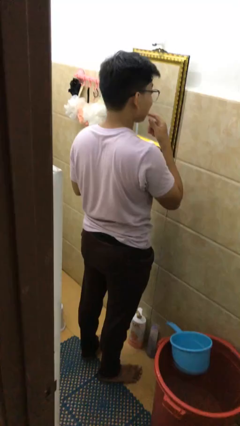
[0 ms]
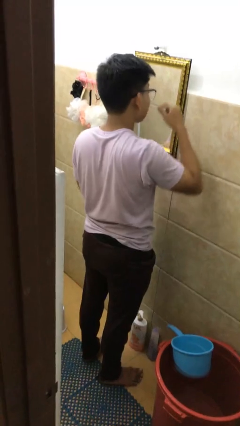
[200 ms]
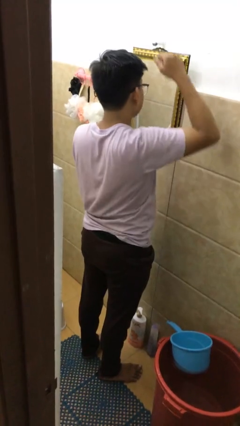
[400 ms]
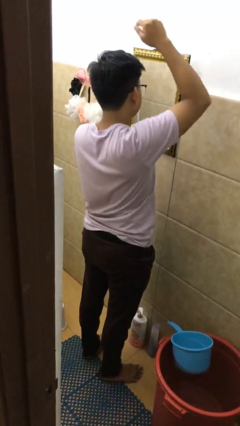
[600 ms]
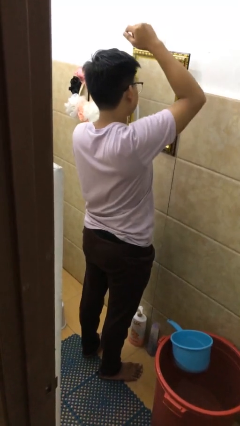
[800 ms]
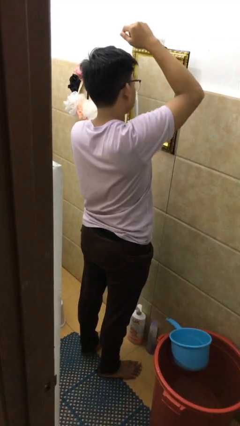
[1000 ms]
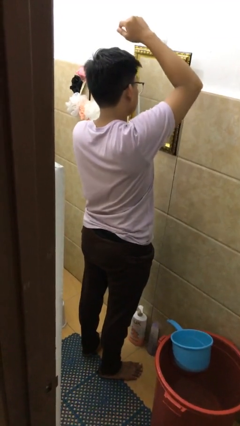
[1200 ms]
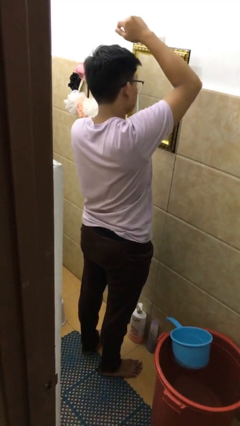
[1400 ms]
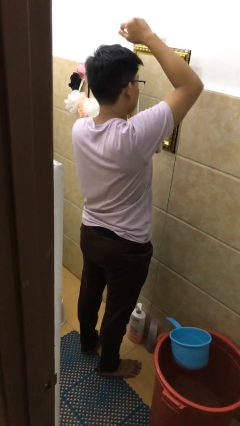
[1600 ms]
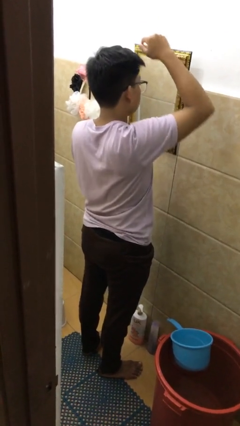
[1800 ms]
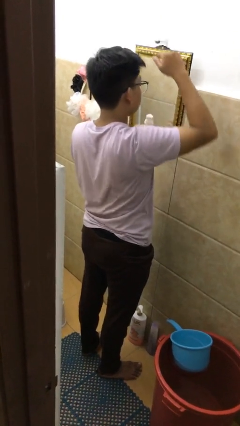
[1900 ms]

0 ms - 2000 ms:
person applies deodorant

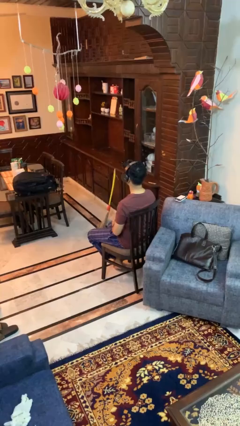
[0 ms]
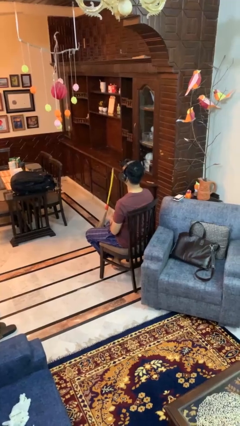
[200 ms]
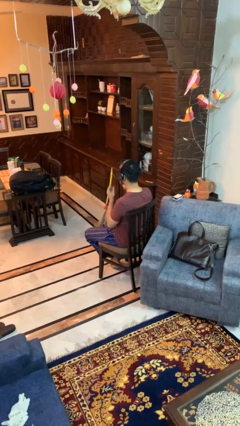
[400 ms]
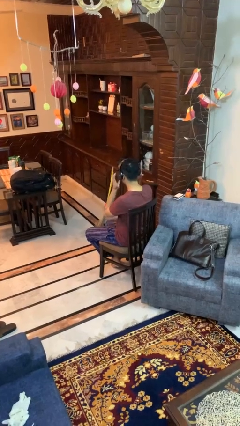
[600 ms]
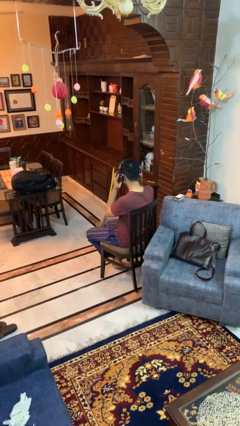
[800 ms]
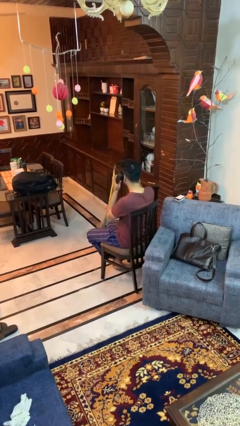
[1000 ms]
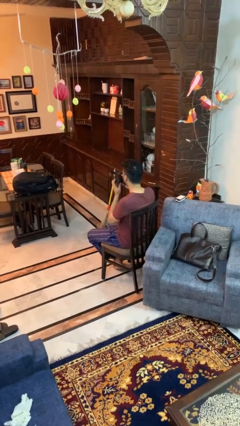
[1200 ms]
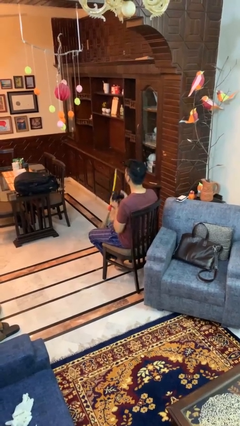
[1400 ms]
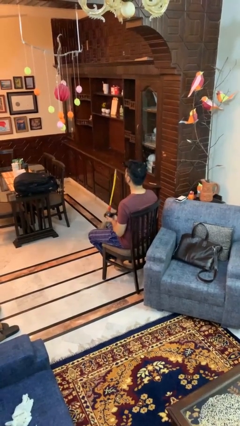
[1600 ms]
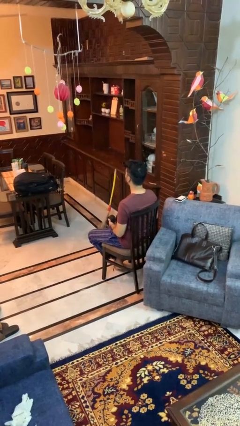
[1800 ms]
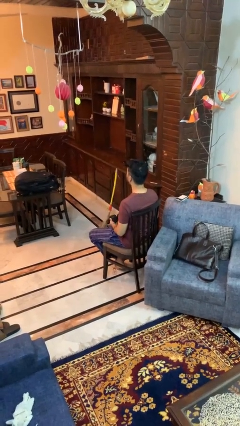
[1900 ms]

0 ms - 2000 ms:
person takes off headphones

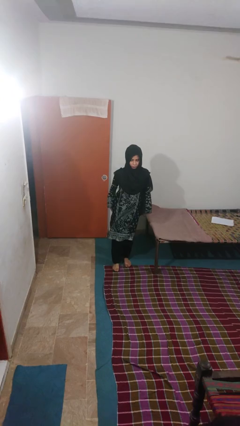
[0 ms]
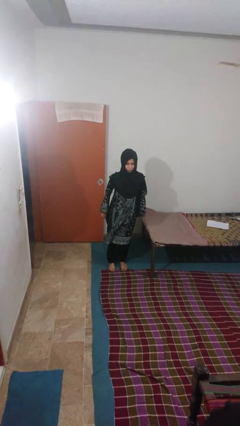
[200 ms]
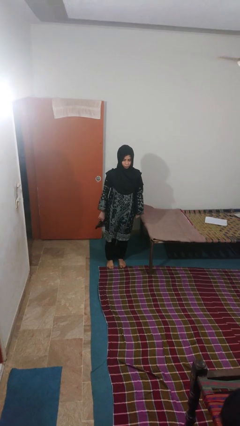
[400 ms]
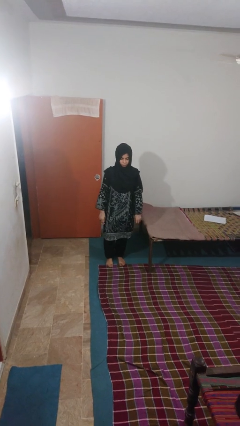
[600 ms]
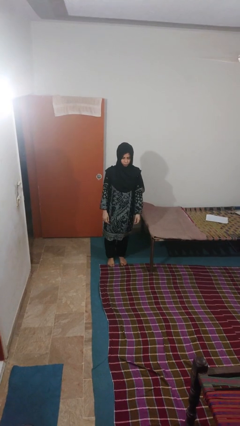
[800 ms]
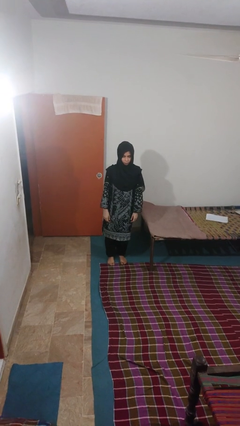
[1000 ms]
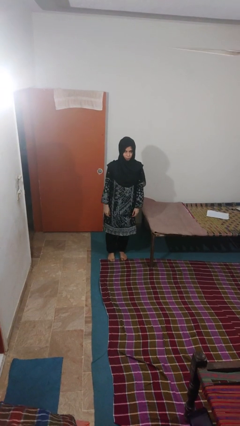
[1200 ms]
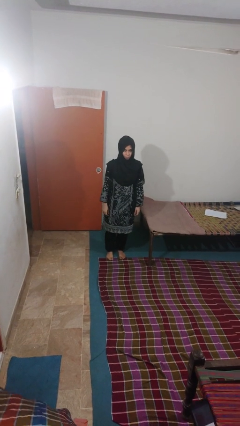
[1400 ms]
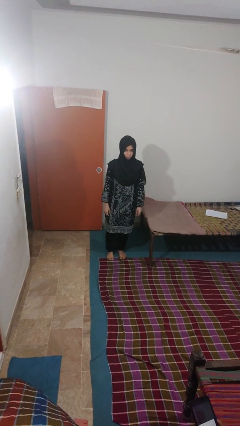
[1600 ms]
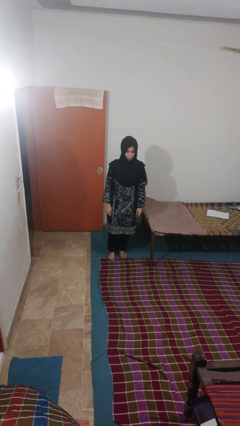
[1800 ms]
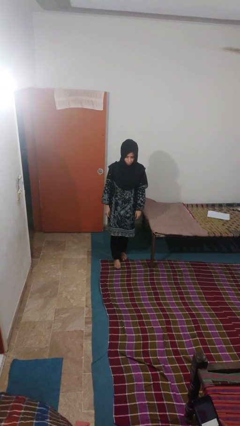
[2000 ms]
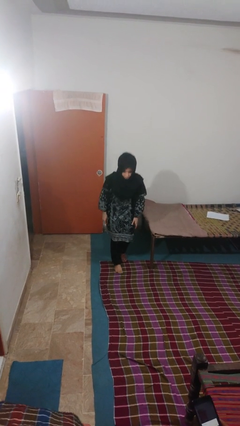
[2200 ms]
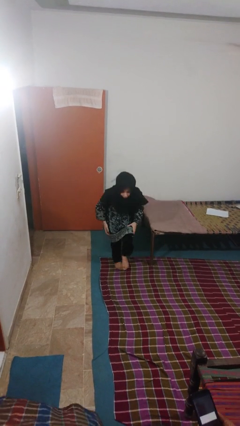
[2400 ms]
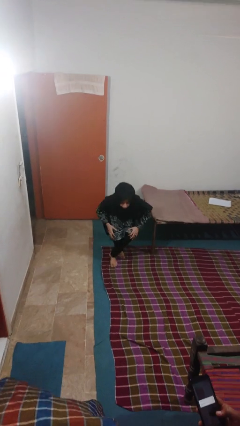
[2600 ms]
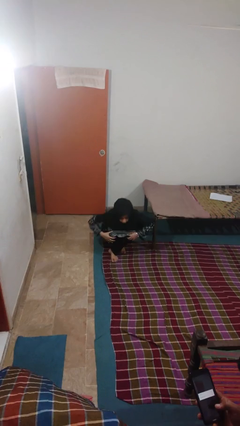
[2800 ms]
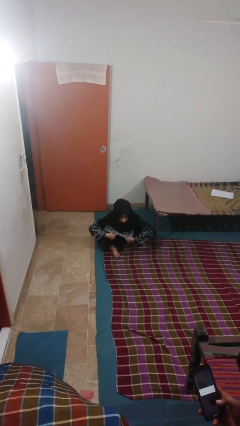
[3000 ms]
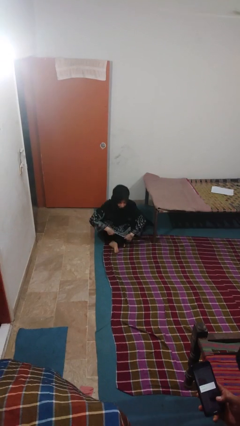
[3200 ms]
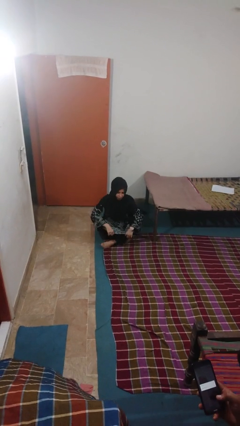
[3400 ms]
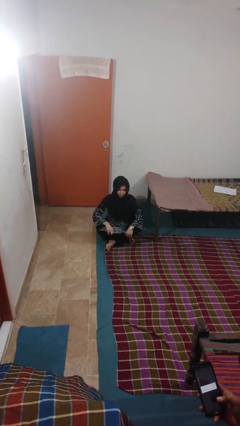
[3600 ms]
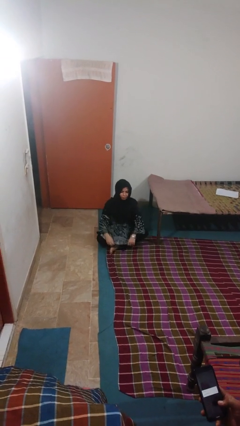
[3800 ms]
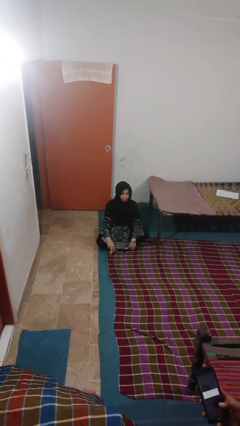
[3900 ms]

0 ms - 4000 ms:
person sits crisscross

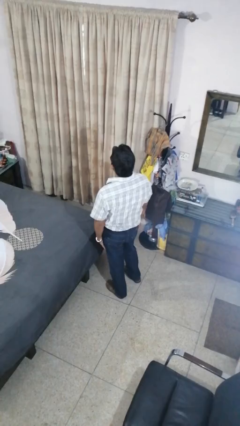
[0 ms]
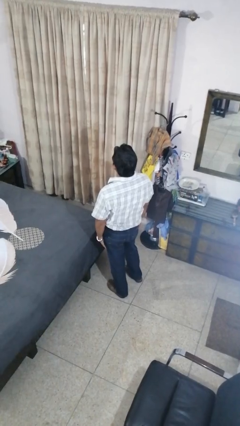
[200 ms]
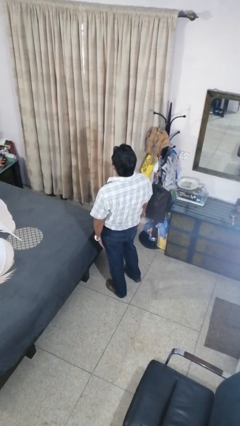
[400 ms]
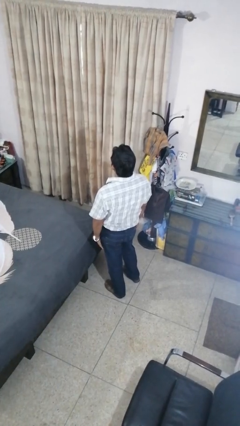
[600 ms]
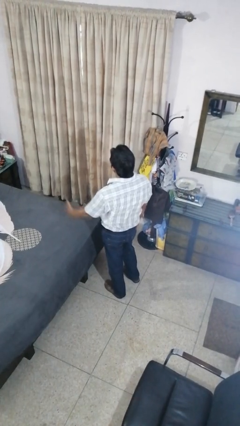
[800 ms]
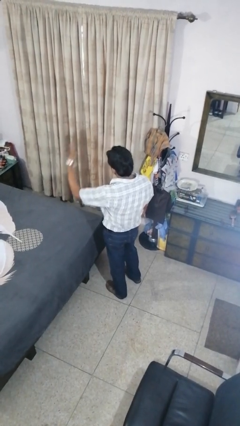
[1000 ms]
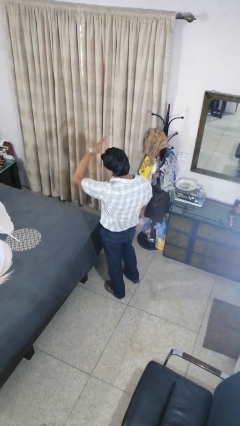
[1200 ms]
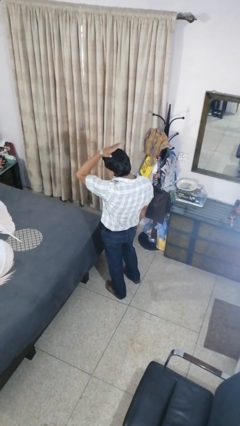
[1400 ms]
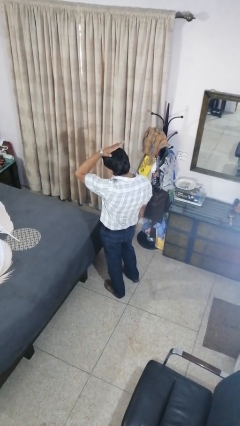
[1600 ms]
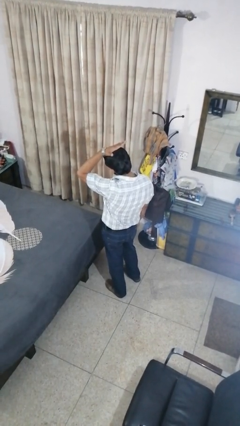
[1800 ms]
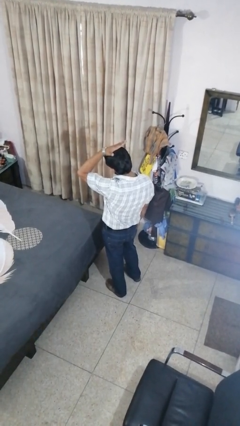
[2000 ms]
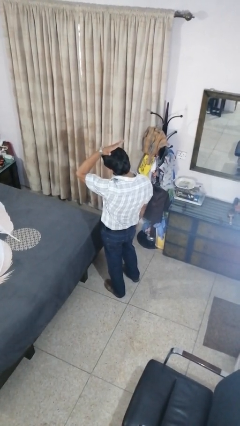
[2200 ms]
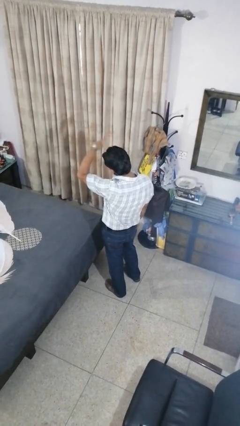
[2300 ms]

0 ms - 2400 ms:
person pats head

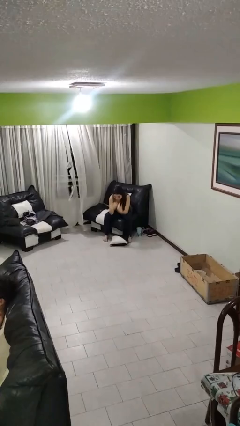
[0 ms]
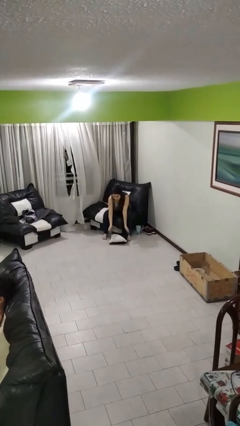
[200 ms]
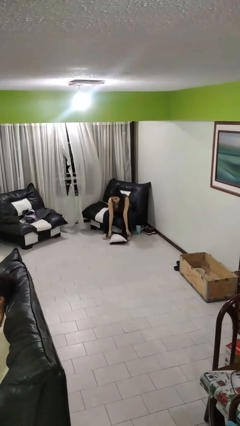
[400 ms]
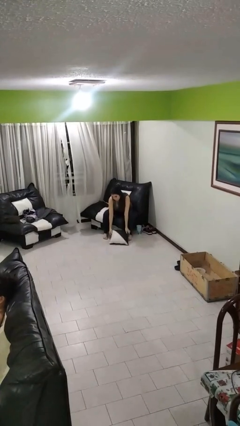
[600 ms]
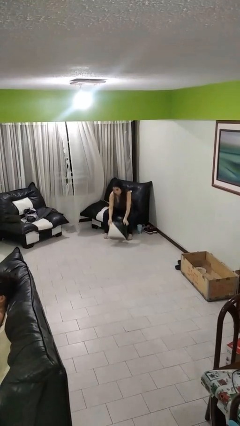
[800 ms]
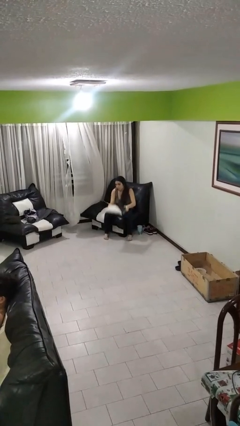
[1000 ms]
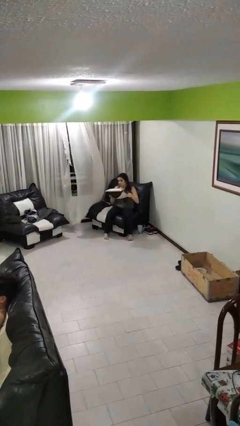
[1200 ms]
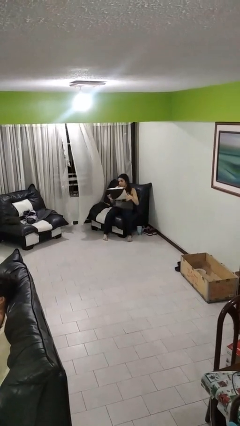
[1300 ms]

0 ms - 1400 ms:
person picks up object from floor

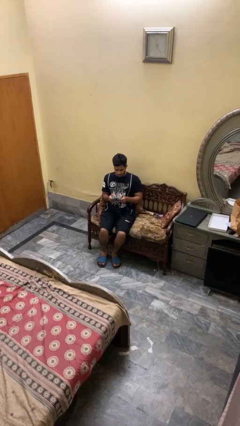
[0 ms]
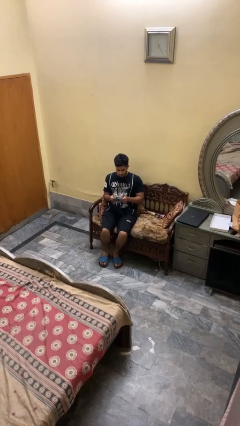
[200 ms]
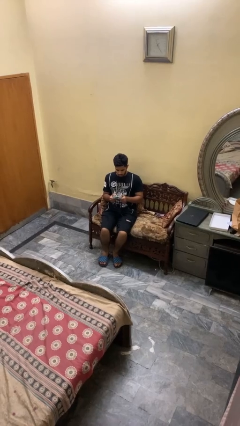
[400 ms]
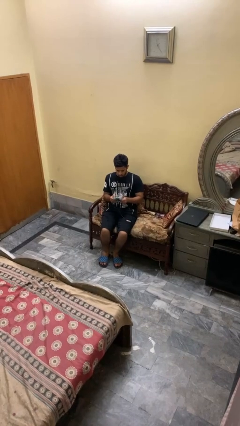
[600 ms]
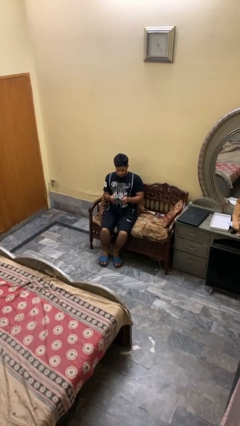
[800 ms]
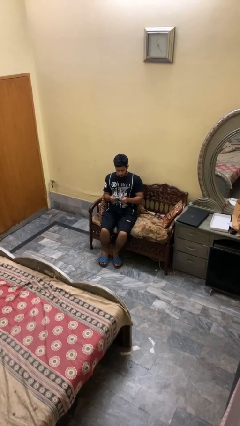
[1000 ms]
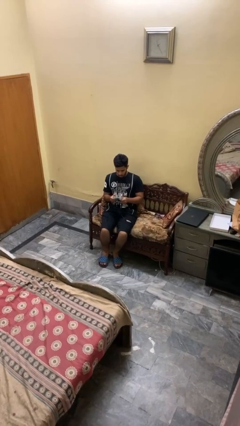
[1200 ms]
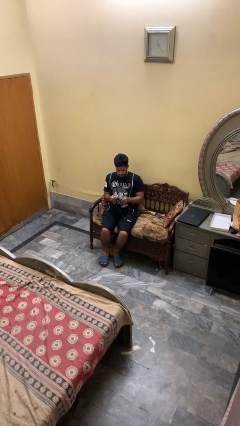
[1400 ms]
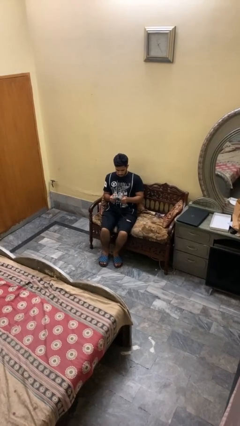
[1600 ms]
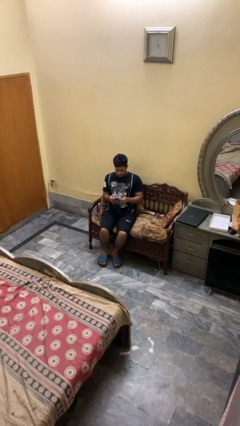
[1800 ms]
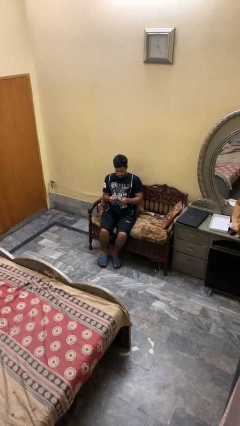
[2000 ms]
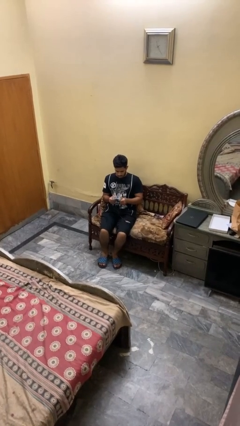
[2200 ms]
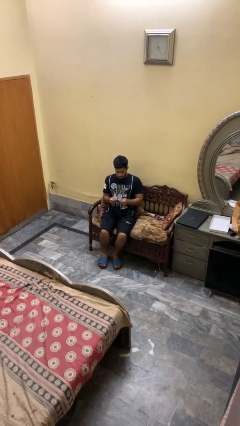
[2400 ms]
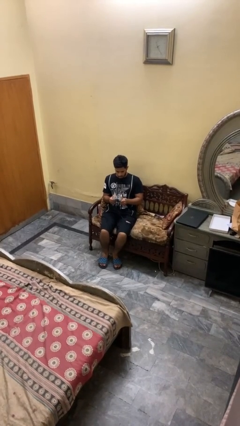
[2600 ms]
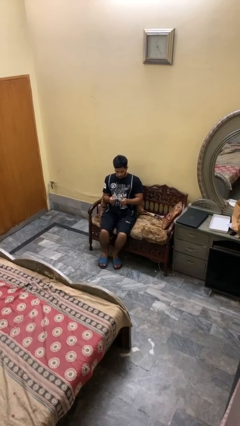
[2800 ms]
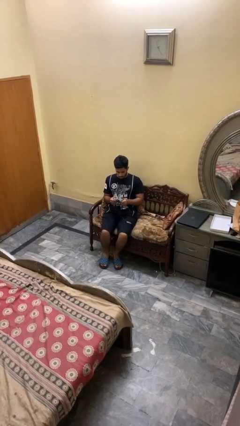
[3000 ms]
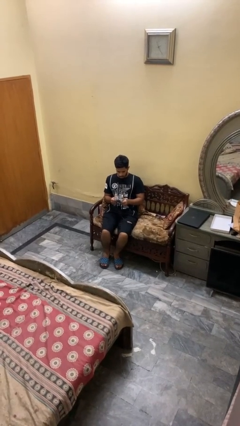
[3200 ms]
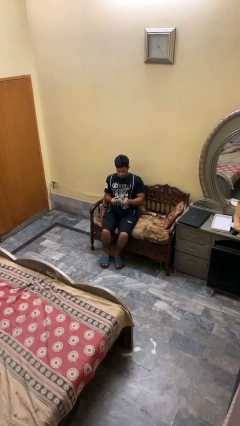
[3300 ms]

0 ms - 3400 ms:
person interacts with handheld game

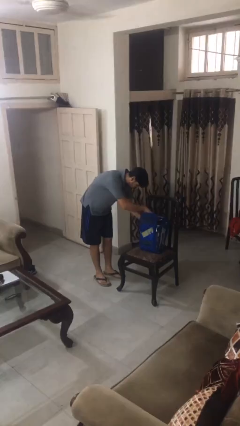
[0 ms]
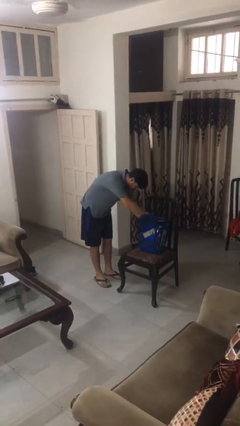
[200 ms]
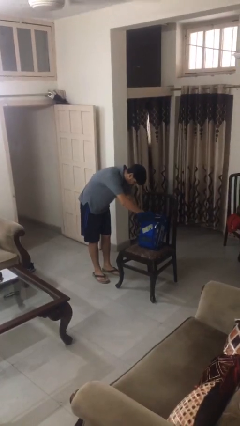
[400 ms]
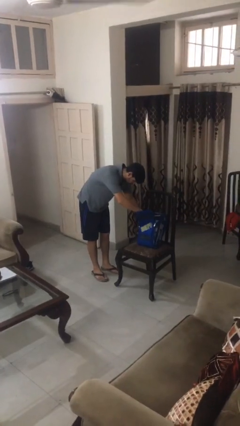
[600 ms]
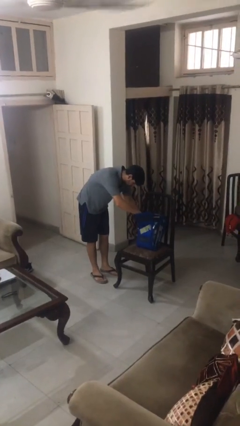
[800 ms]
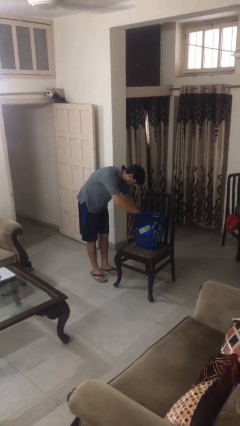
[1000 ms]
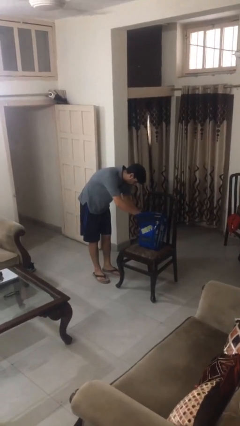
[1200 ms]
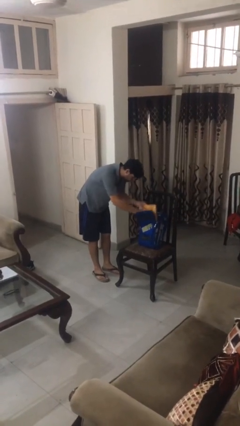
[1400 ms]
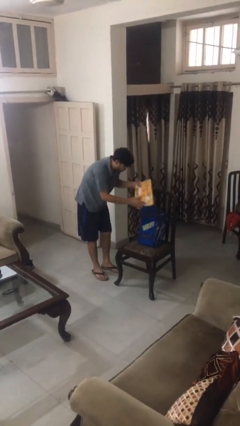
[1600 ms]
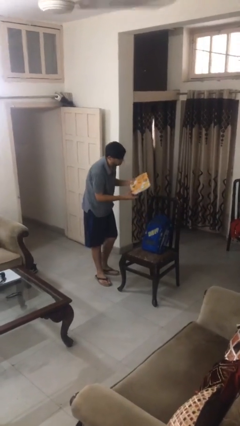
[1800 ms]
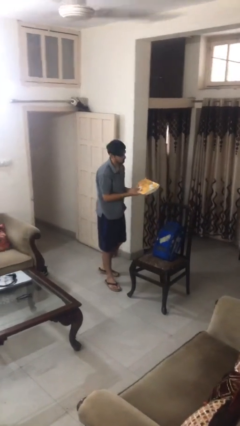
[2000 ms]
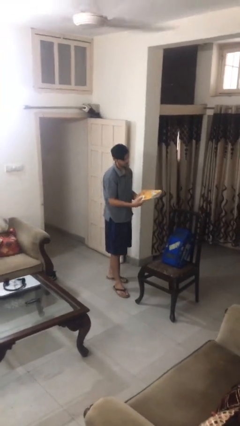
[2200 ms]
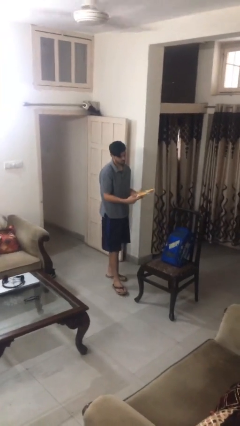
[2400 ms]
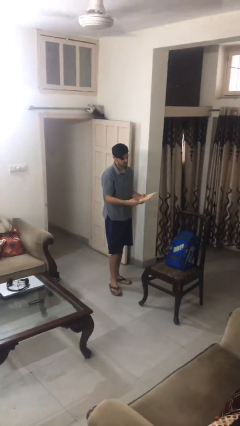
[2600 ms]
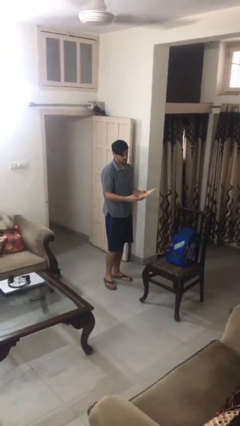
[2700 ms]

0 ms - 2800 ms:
person takes object from backpack
